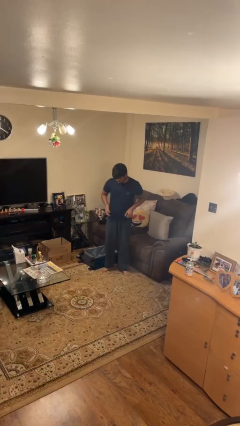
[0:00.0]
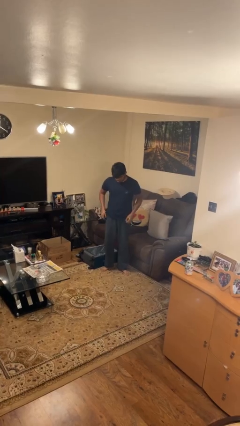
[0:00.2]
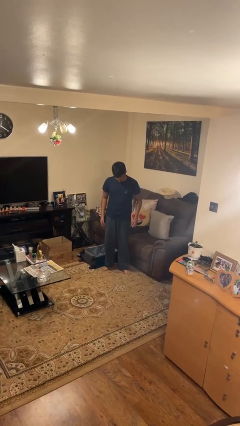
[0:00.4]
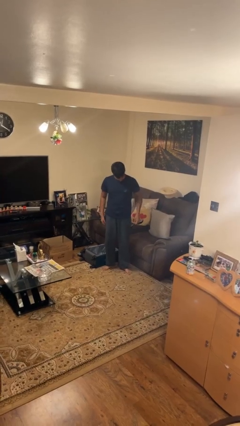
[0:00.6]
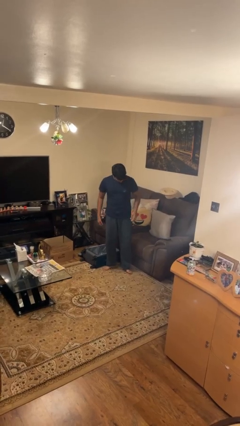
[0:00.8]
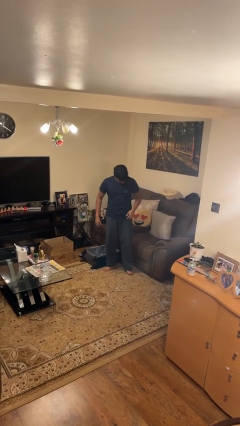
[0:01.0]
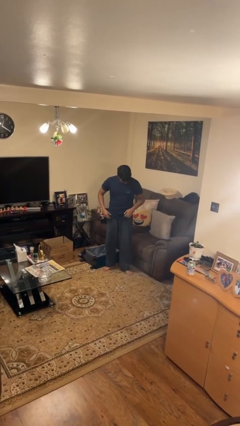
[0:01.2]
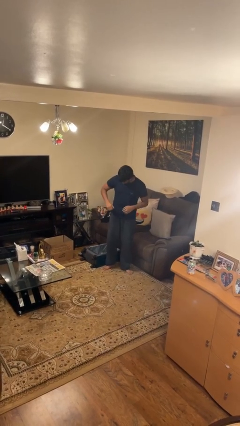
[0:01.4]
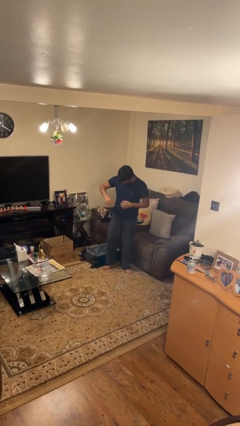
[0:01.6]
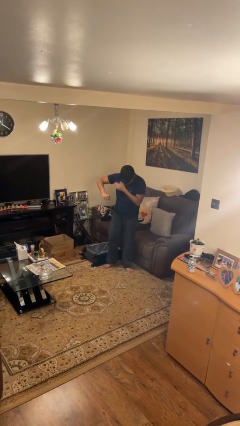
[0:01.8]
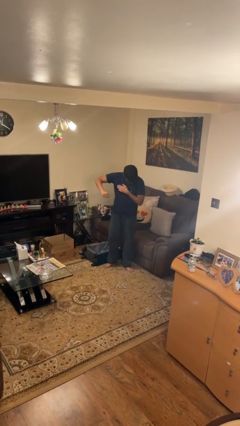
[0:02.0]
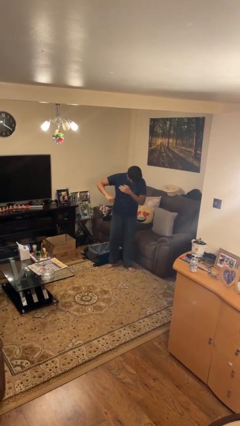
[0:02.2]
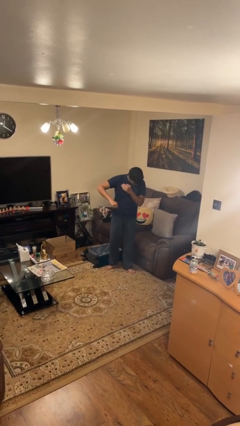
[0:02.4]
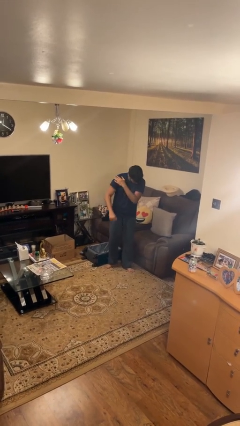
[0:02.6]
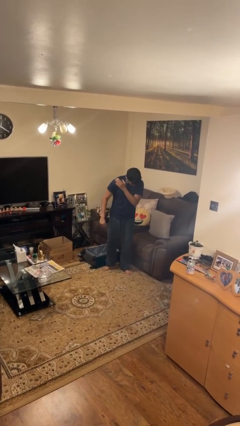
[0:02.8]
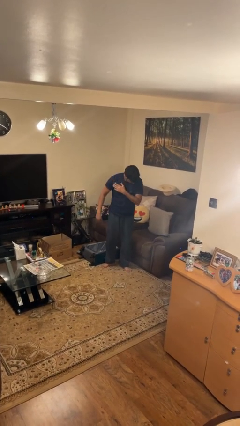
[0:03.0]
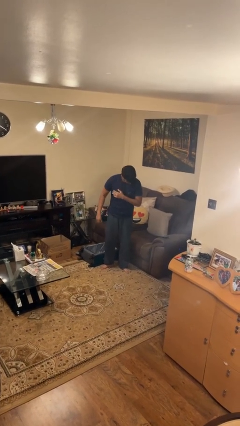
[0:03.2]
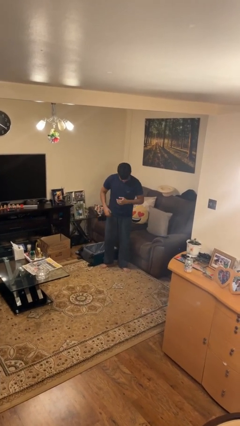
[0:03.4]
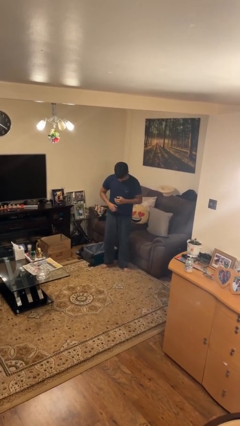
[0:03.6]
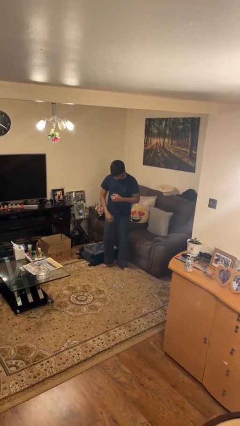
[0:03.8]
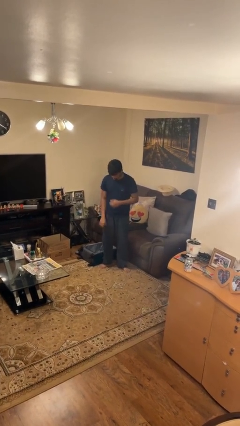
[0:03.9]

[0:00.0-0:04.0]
person swats bug

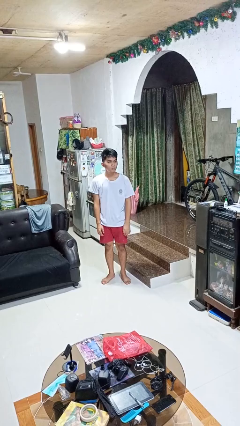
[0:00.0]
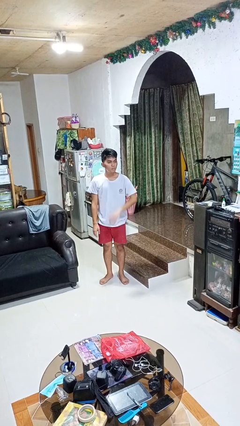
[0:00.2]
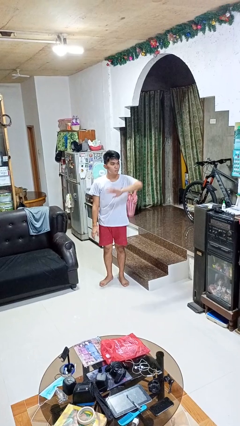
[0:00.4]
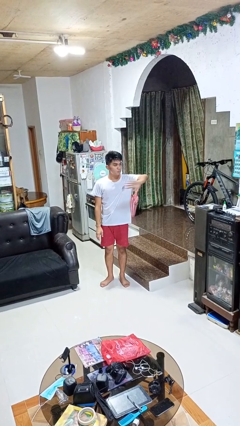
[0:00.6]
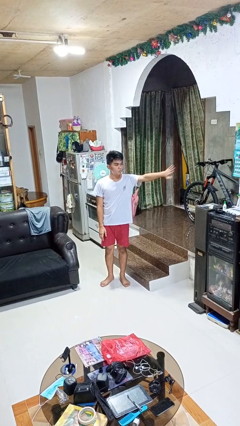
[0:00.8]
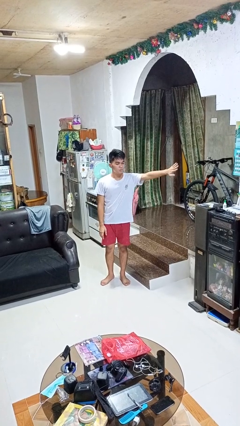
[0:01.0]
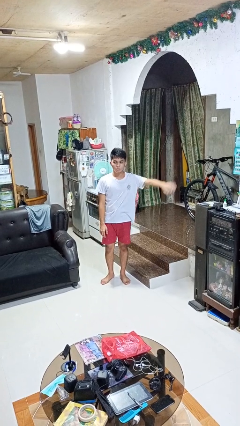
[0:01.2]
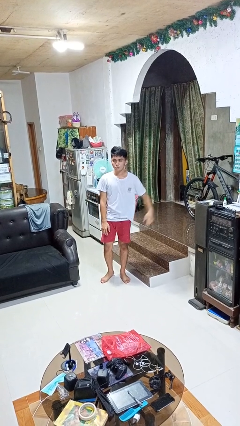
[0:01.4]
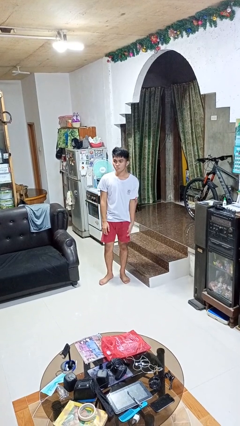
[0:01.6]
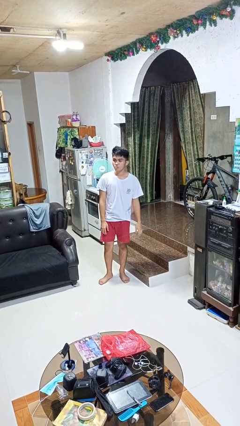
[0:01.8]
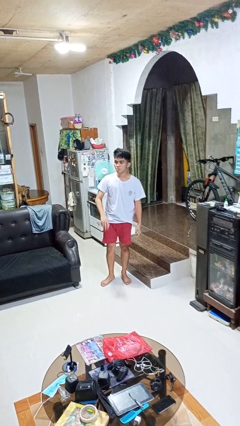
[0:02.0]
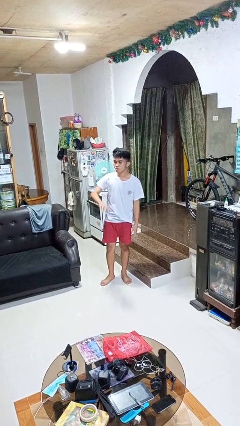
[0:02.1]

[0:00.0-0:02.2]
person gestures swipe left

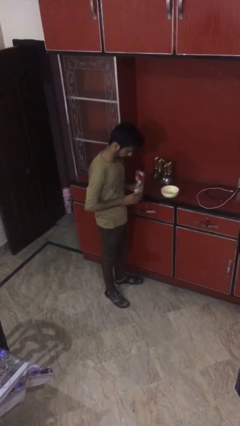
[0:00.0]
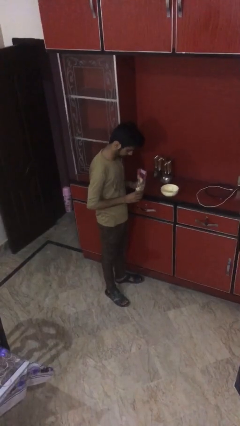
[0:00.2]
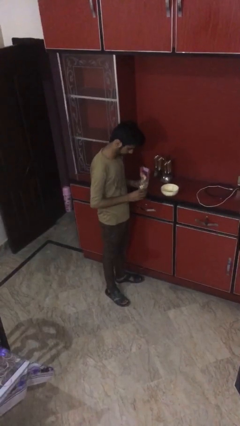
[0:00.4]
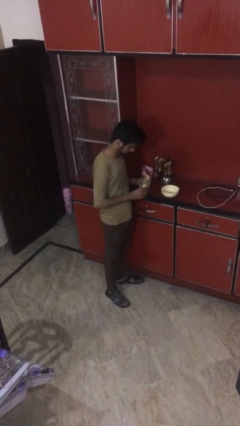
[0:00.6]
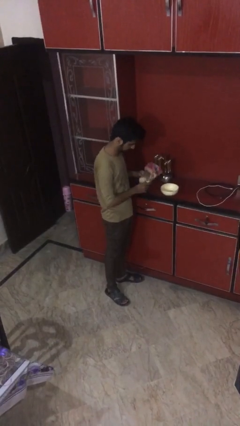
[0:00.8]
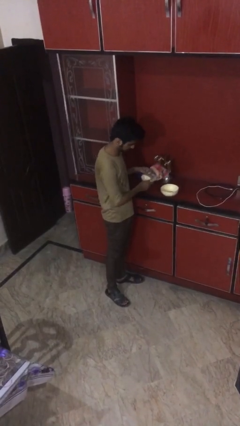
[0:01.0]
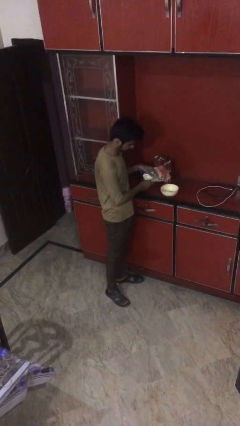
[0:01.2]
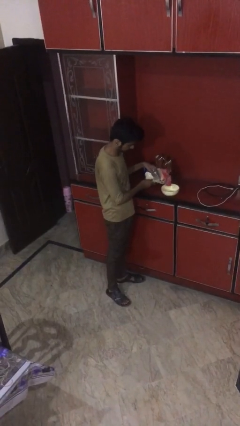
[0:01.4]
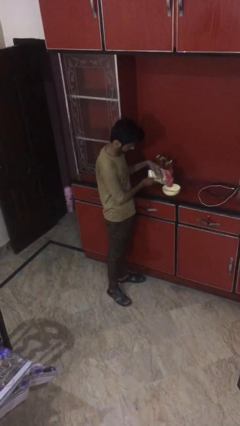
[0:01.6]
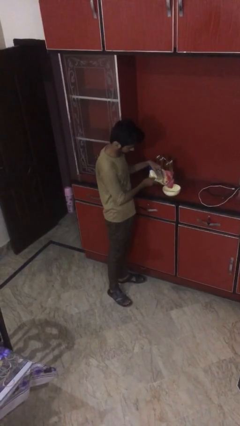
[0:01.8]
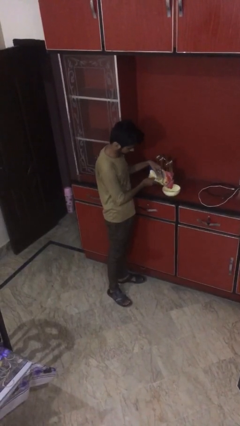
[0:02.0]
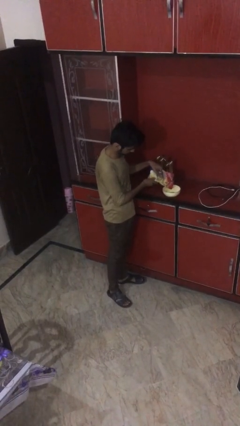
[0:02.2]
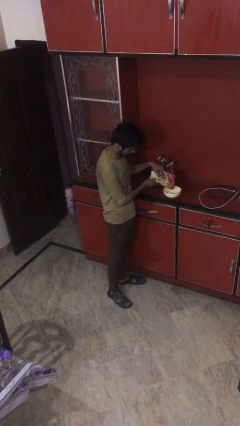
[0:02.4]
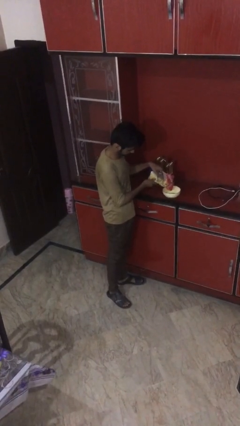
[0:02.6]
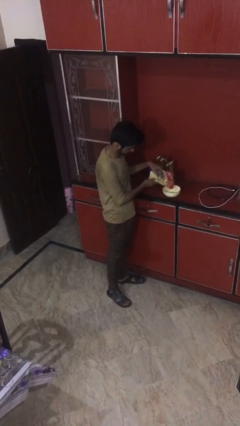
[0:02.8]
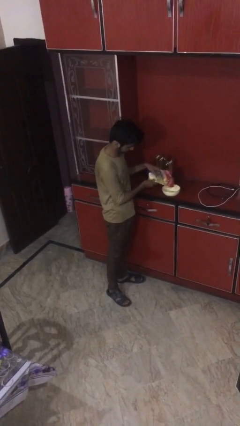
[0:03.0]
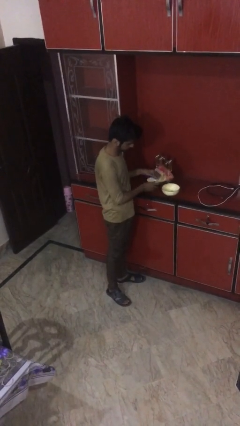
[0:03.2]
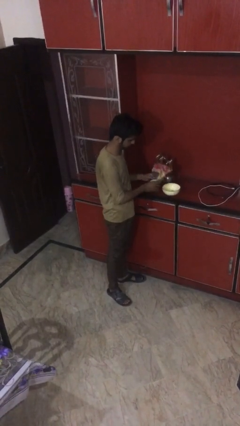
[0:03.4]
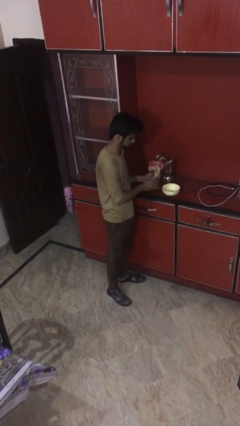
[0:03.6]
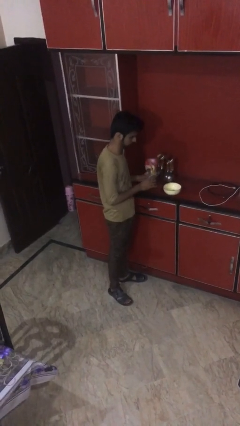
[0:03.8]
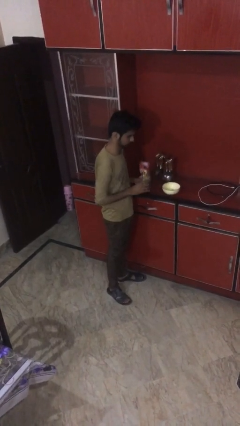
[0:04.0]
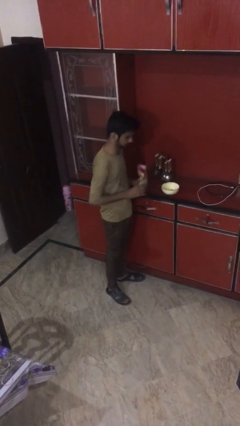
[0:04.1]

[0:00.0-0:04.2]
person pours into bowl

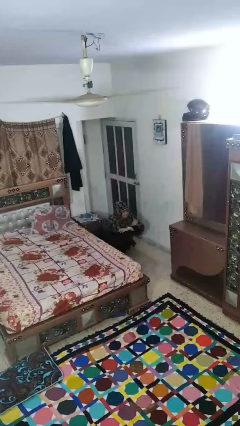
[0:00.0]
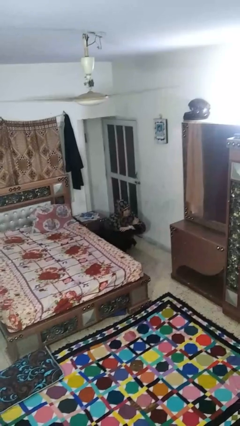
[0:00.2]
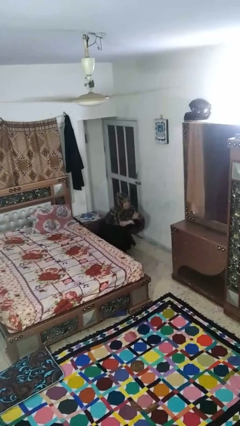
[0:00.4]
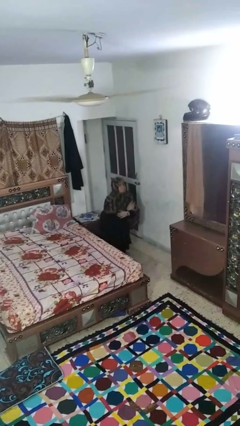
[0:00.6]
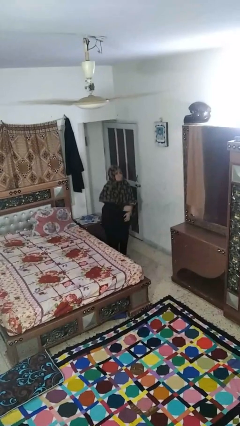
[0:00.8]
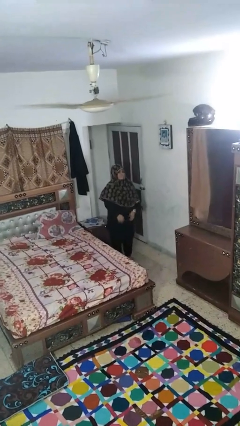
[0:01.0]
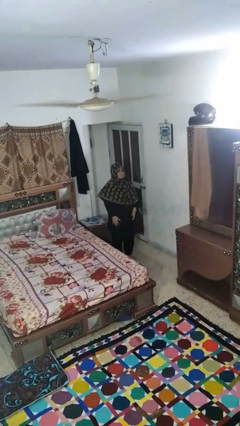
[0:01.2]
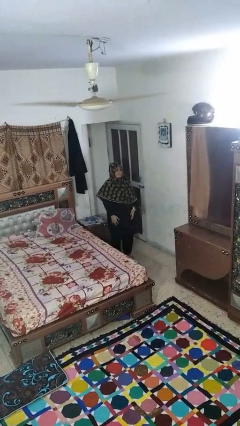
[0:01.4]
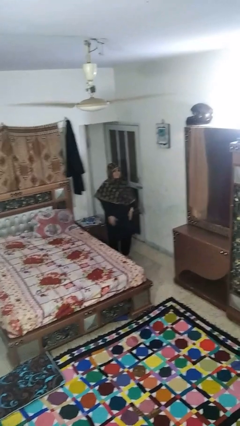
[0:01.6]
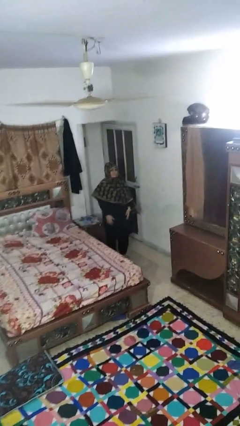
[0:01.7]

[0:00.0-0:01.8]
person stands up

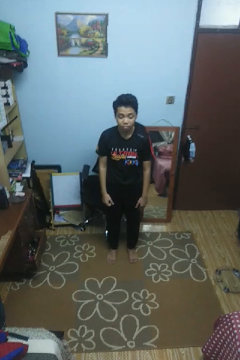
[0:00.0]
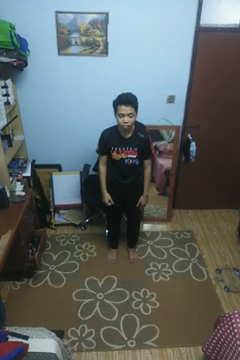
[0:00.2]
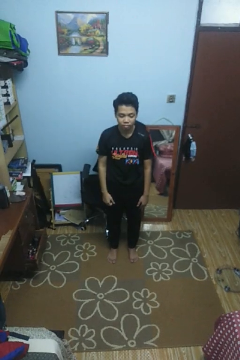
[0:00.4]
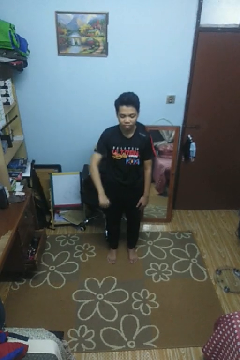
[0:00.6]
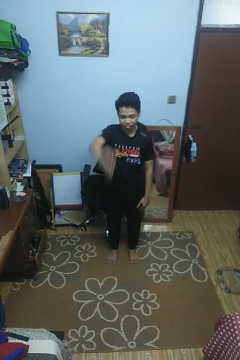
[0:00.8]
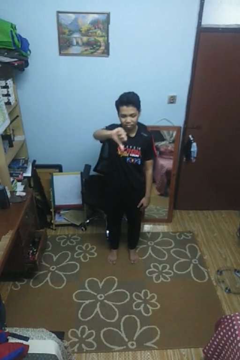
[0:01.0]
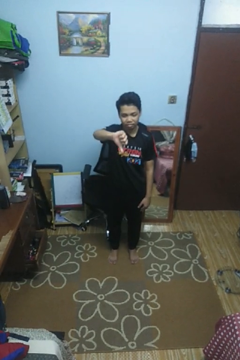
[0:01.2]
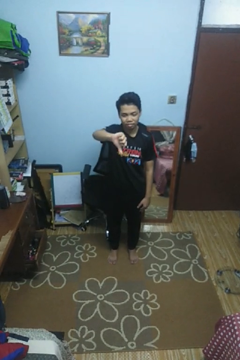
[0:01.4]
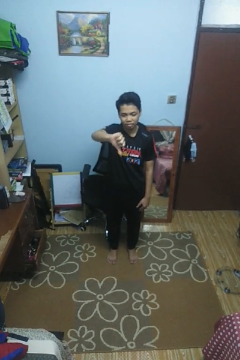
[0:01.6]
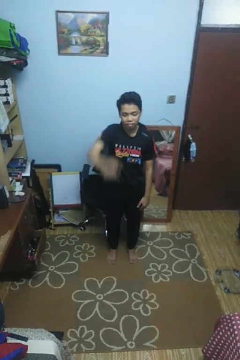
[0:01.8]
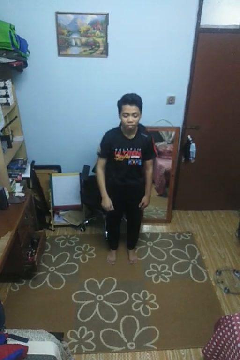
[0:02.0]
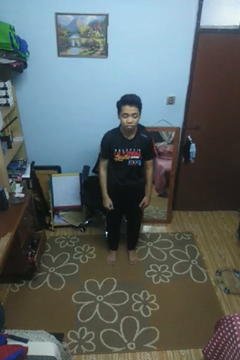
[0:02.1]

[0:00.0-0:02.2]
person gestures thumbs down

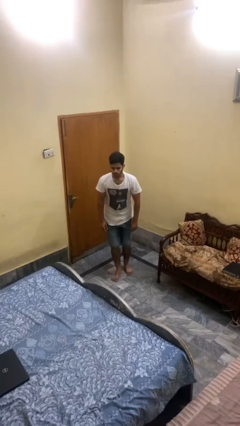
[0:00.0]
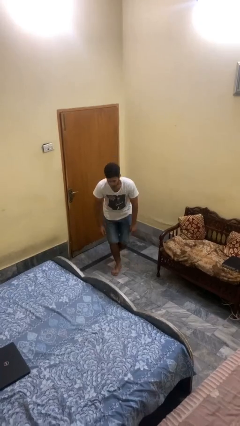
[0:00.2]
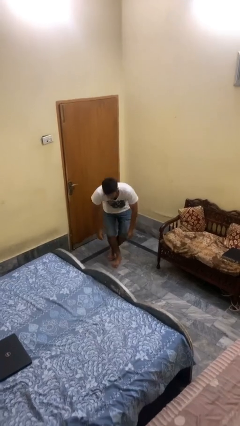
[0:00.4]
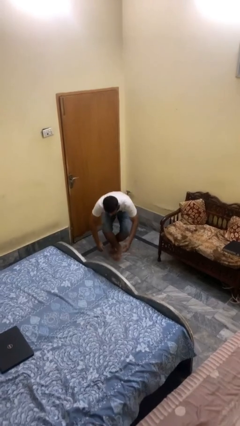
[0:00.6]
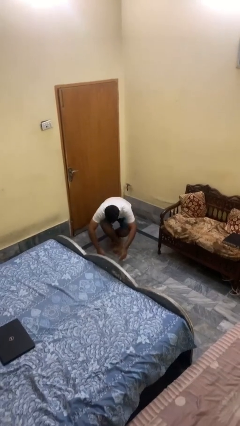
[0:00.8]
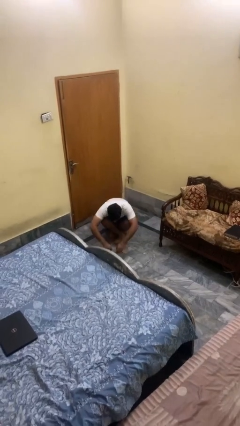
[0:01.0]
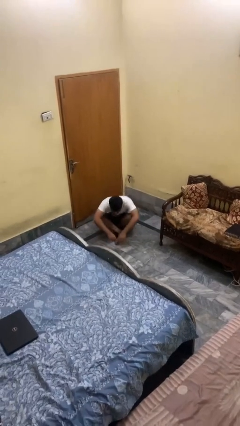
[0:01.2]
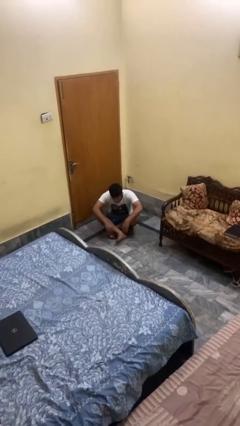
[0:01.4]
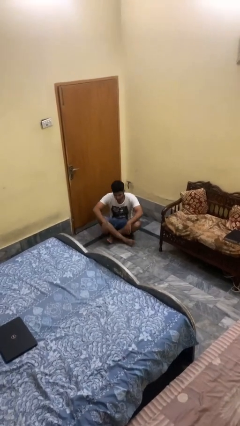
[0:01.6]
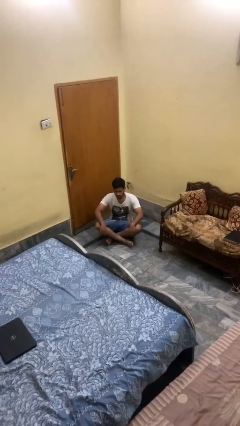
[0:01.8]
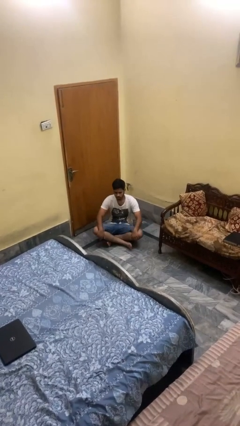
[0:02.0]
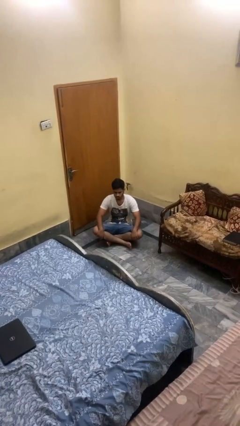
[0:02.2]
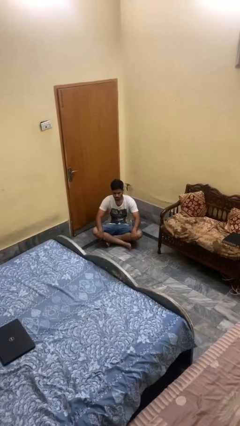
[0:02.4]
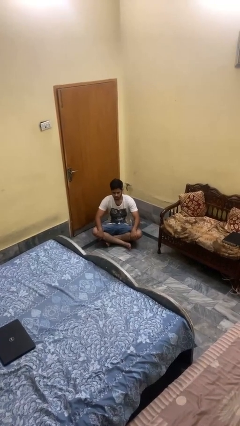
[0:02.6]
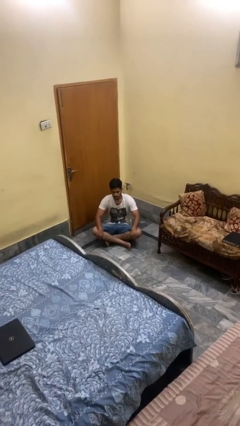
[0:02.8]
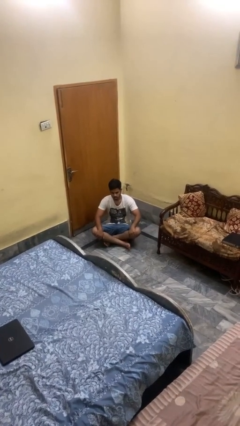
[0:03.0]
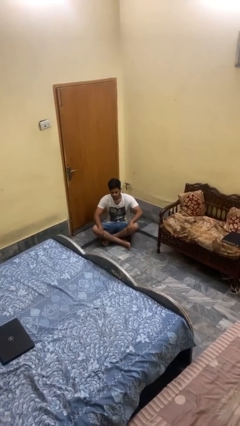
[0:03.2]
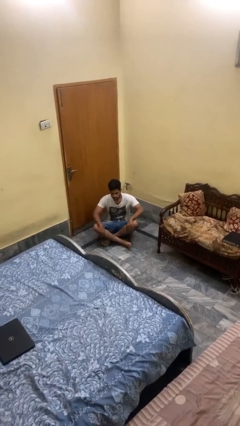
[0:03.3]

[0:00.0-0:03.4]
person sits crisscross
